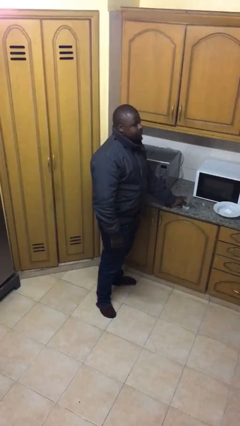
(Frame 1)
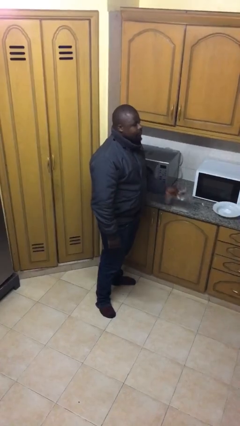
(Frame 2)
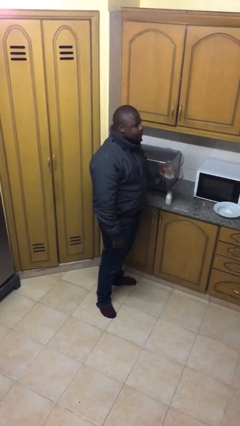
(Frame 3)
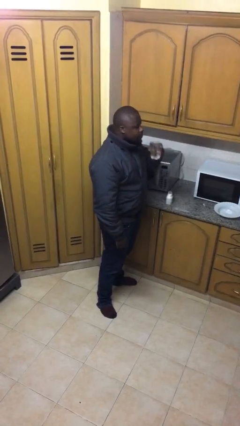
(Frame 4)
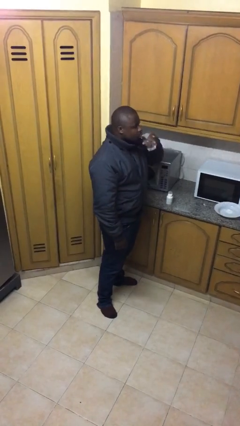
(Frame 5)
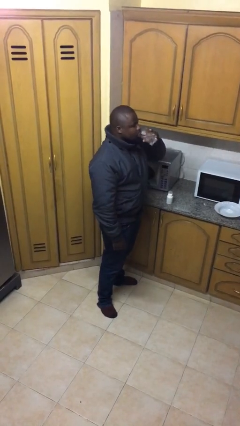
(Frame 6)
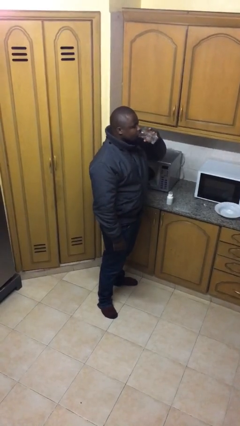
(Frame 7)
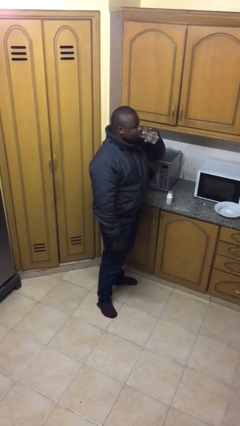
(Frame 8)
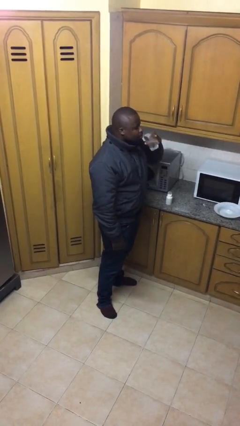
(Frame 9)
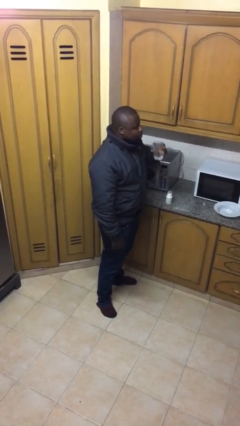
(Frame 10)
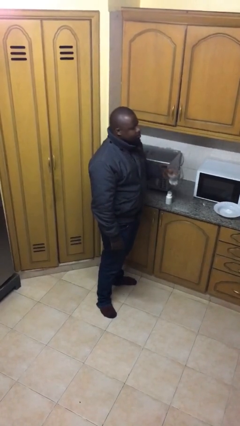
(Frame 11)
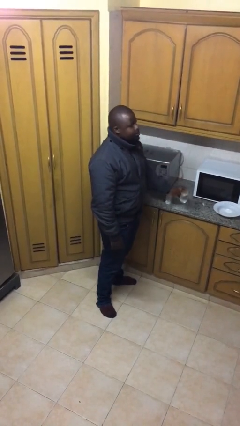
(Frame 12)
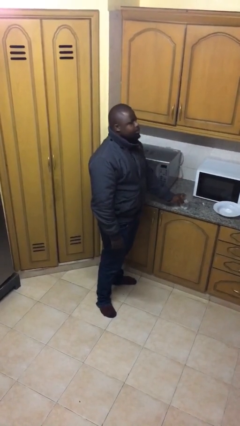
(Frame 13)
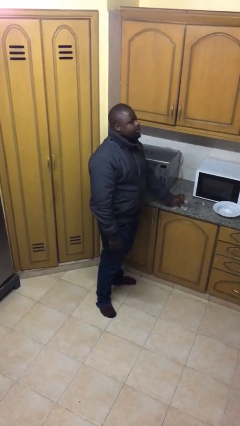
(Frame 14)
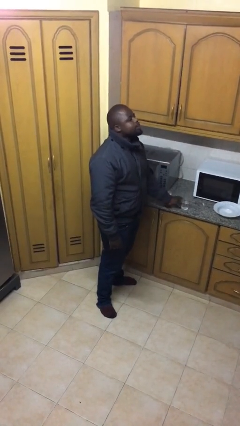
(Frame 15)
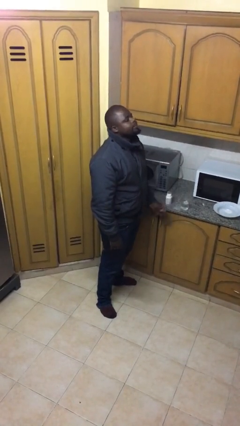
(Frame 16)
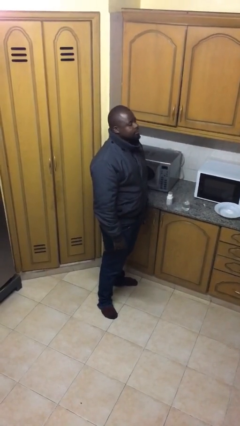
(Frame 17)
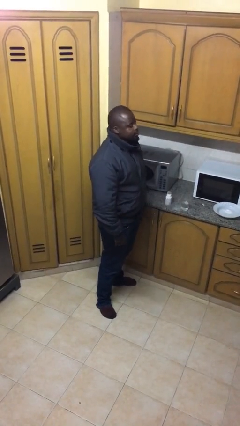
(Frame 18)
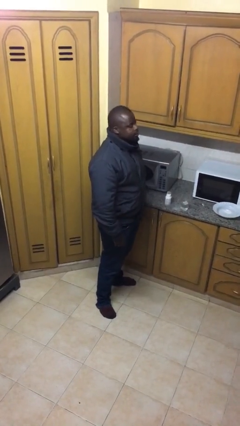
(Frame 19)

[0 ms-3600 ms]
person drinks from cup

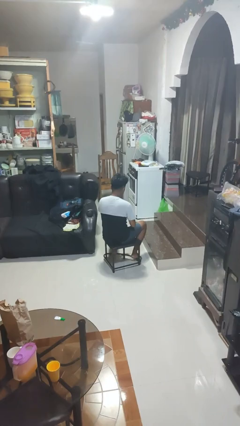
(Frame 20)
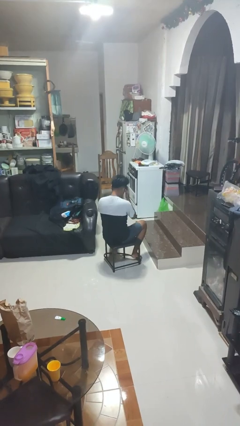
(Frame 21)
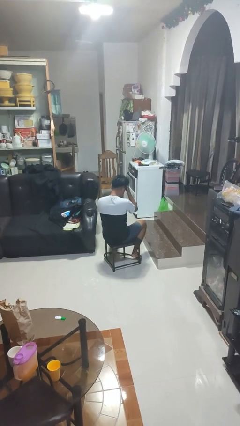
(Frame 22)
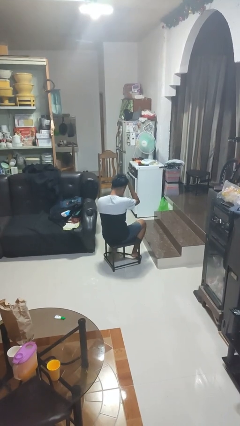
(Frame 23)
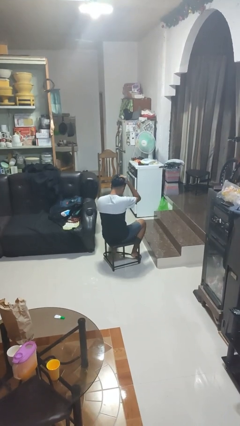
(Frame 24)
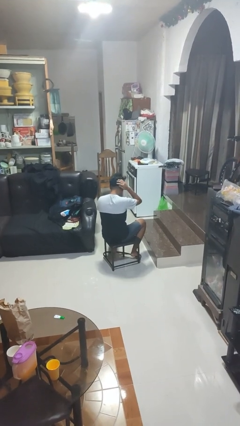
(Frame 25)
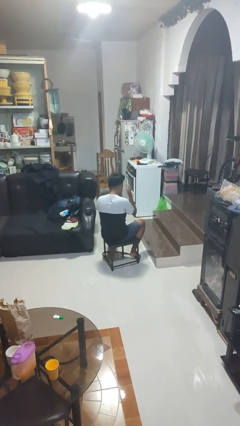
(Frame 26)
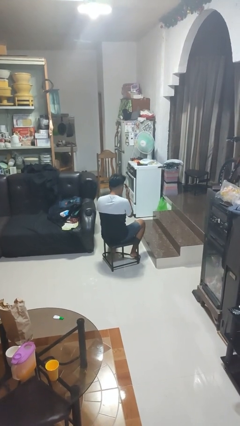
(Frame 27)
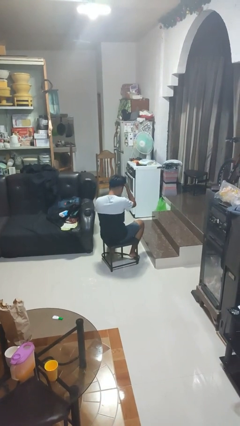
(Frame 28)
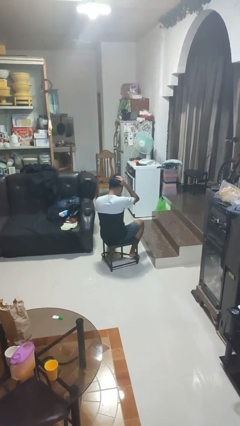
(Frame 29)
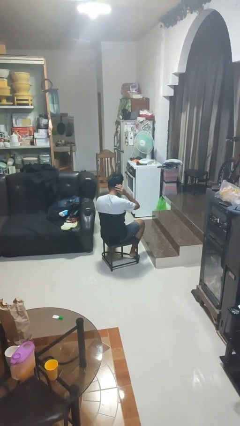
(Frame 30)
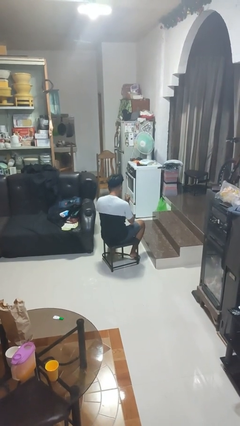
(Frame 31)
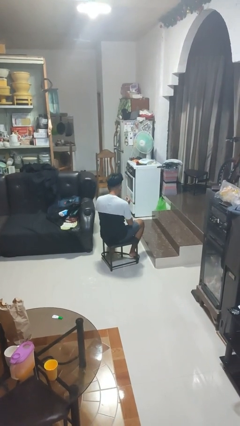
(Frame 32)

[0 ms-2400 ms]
person strokes hair

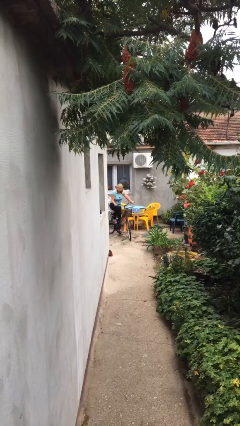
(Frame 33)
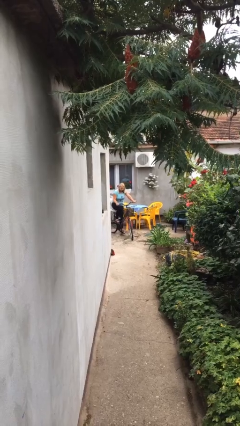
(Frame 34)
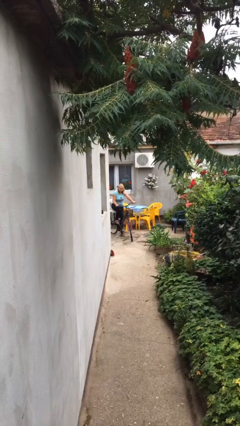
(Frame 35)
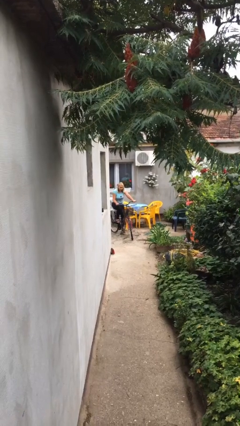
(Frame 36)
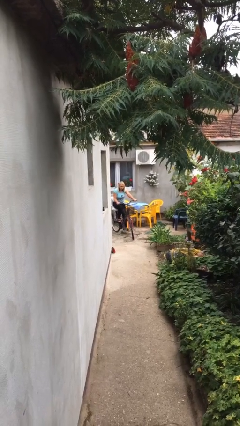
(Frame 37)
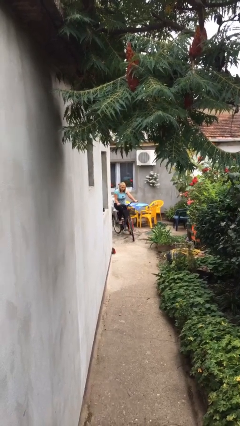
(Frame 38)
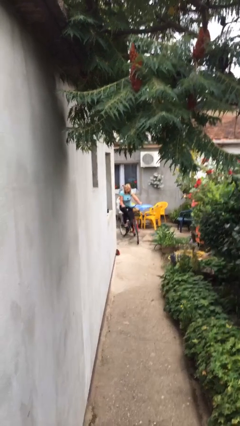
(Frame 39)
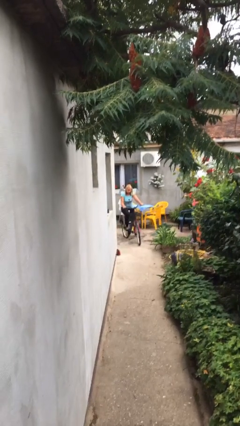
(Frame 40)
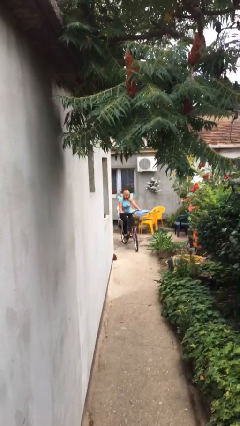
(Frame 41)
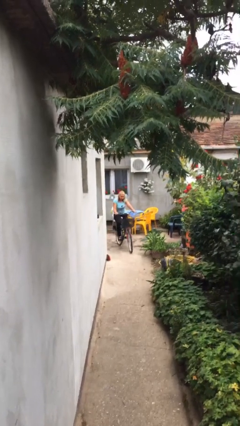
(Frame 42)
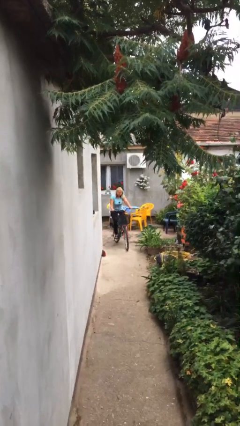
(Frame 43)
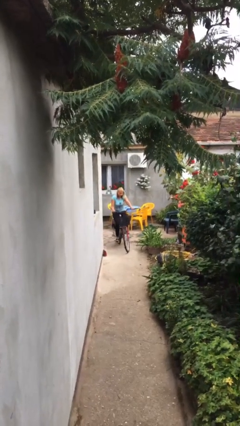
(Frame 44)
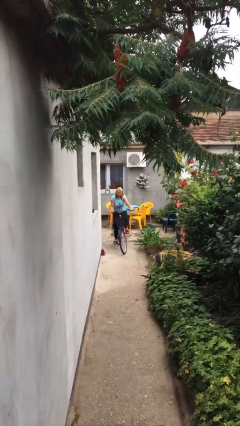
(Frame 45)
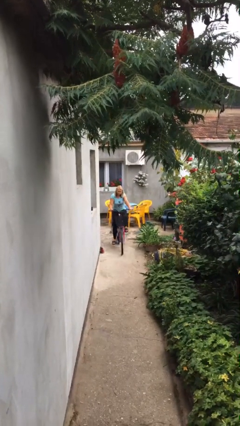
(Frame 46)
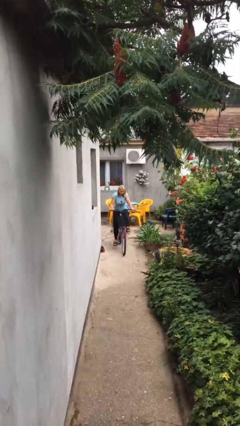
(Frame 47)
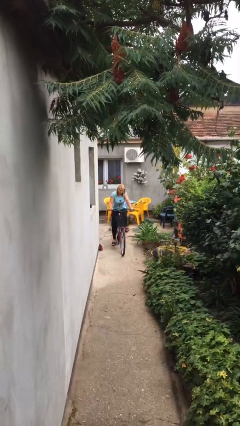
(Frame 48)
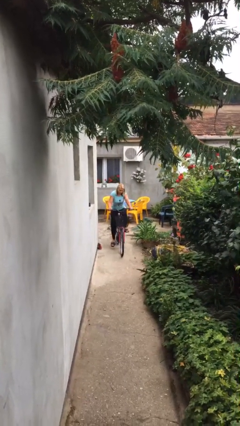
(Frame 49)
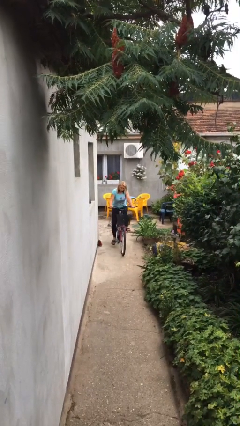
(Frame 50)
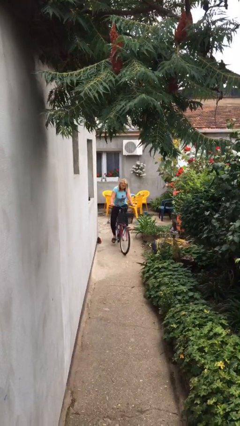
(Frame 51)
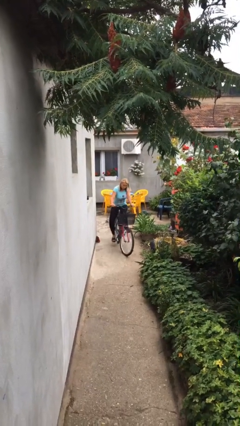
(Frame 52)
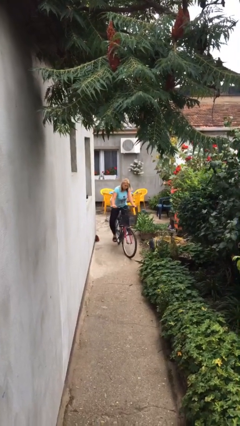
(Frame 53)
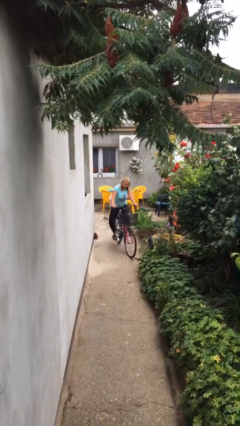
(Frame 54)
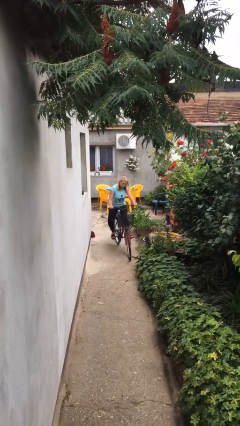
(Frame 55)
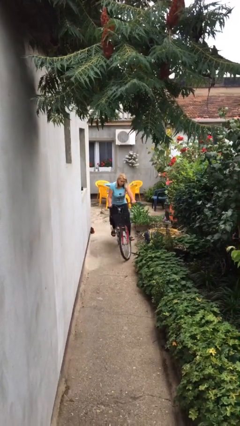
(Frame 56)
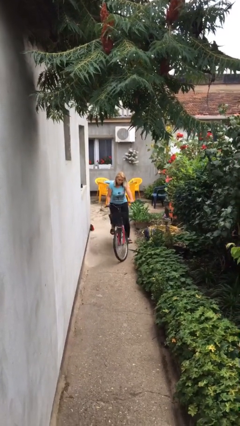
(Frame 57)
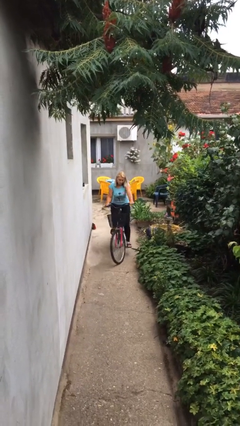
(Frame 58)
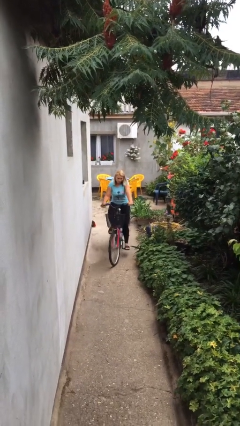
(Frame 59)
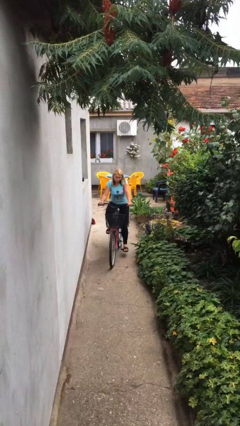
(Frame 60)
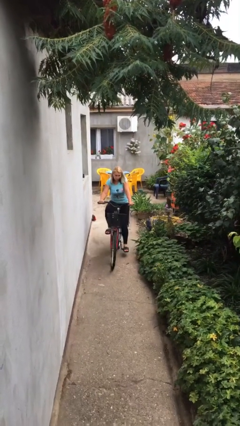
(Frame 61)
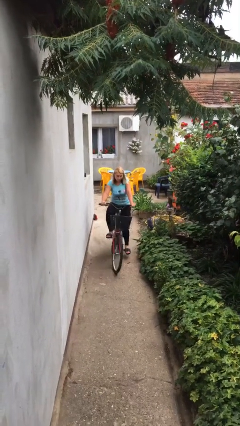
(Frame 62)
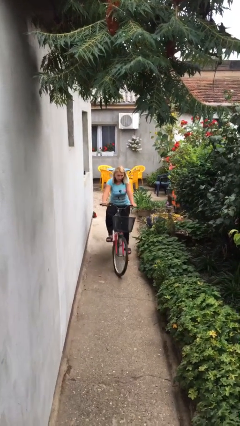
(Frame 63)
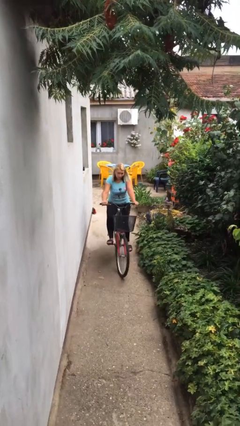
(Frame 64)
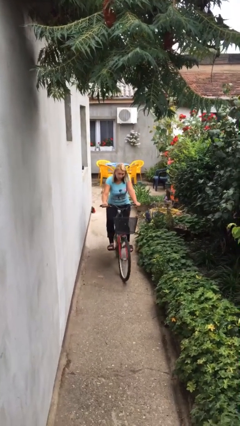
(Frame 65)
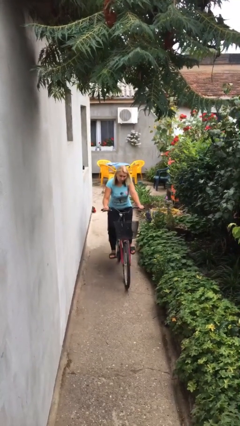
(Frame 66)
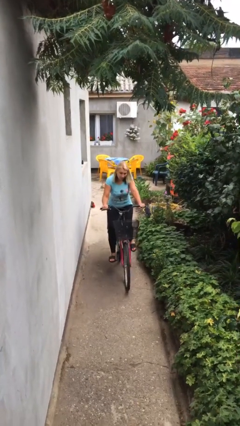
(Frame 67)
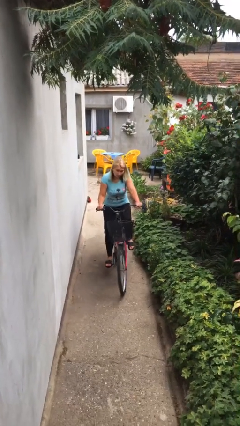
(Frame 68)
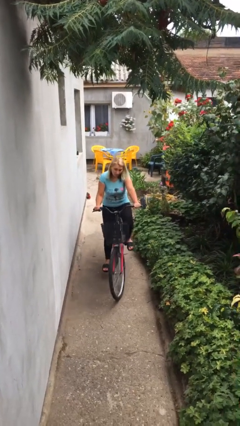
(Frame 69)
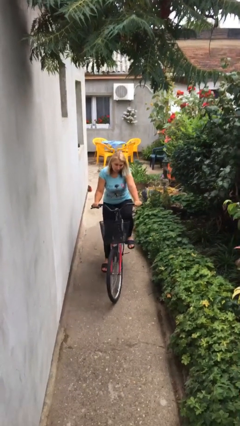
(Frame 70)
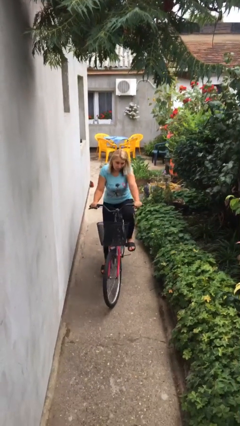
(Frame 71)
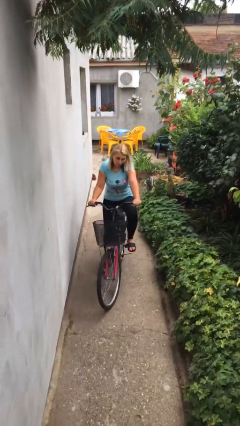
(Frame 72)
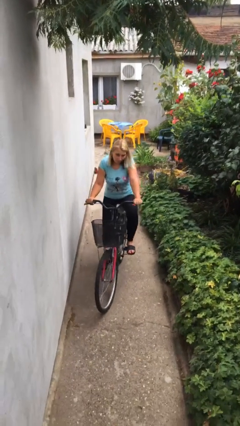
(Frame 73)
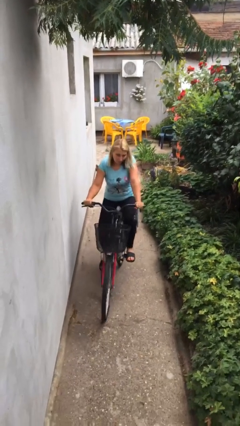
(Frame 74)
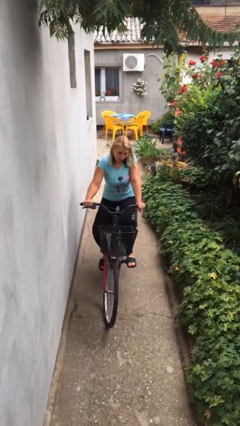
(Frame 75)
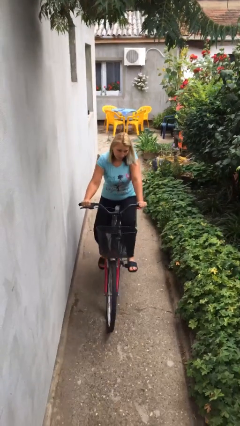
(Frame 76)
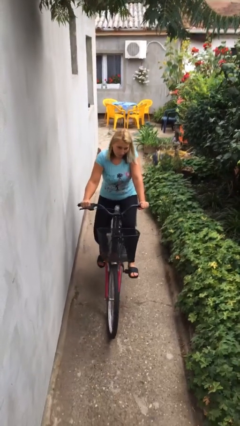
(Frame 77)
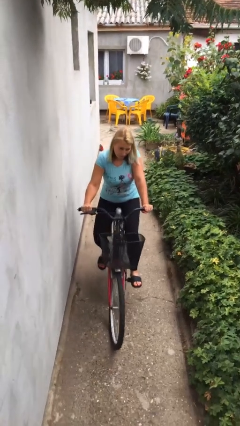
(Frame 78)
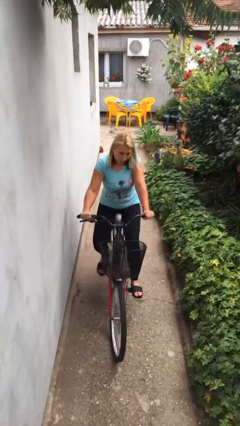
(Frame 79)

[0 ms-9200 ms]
person rides bicycle

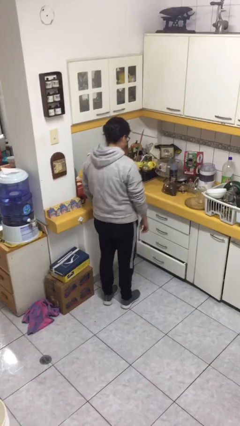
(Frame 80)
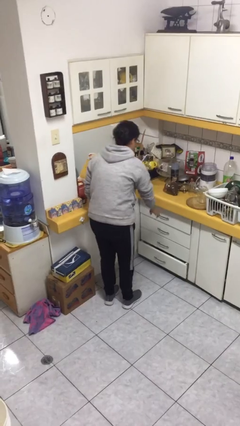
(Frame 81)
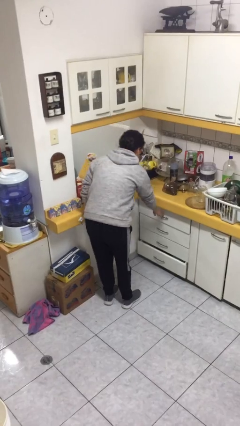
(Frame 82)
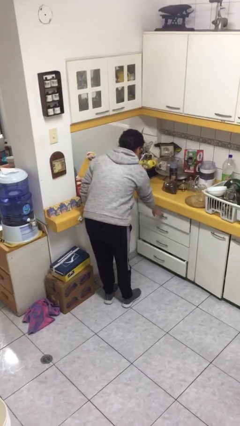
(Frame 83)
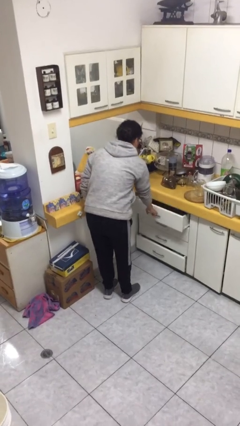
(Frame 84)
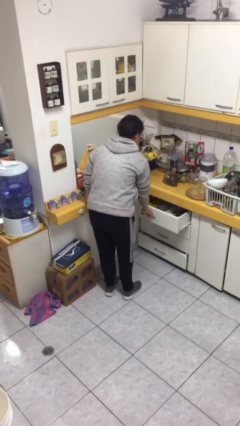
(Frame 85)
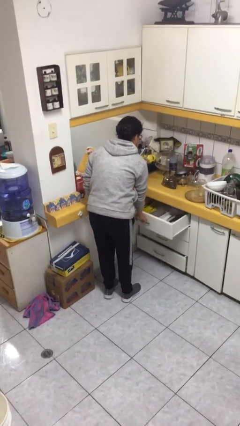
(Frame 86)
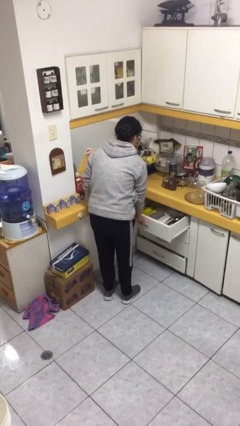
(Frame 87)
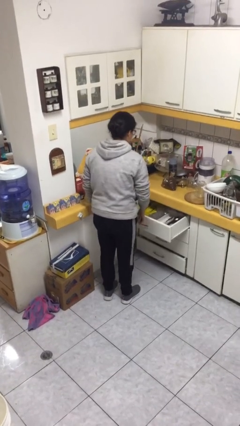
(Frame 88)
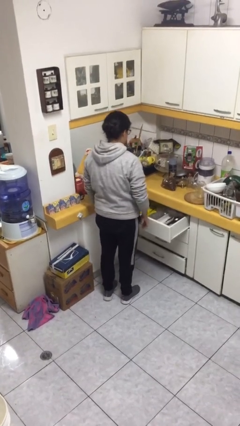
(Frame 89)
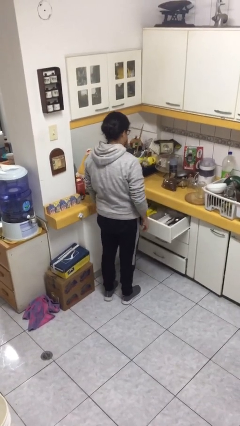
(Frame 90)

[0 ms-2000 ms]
person opens kitchen drawer

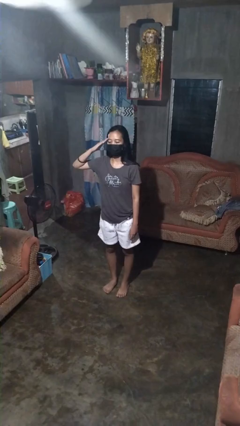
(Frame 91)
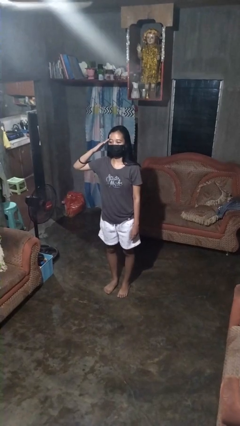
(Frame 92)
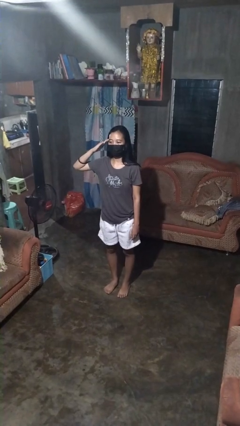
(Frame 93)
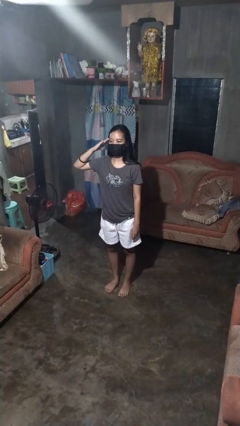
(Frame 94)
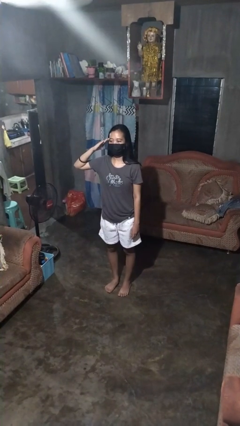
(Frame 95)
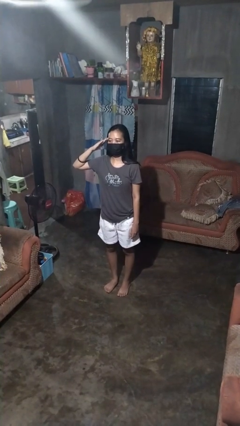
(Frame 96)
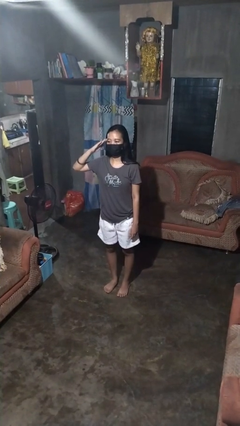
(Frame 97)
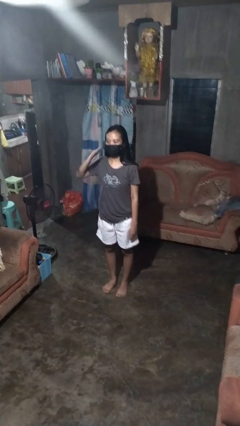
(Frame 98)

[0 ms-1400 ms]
person salutes
